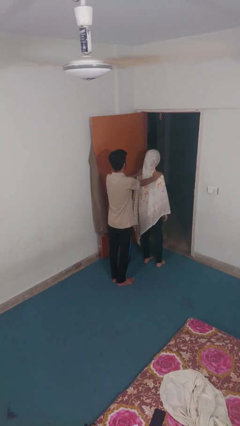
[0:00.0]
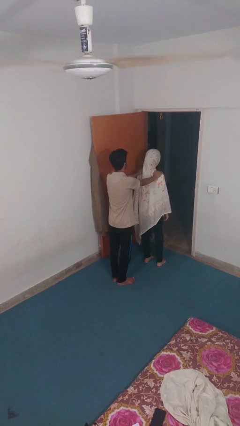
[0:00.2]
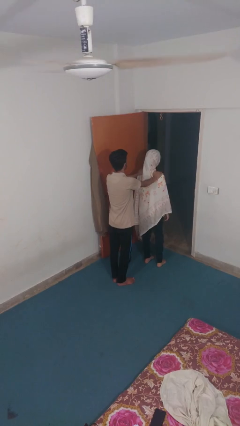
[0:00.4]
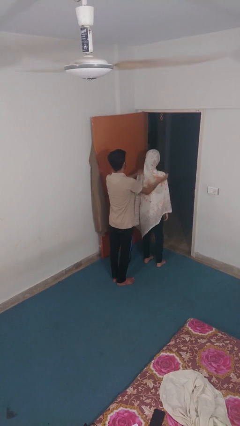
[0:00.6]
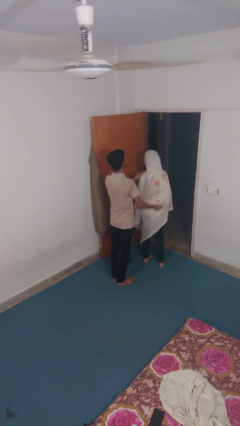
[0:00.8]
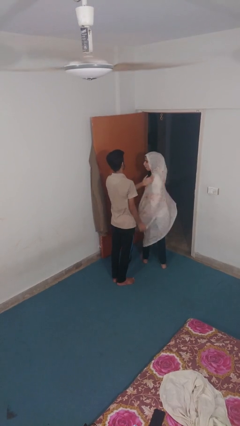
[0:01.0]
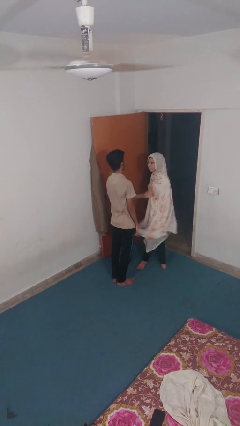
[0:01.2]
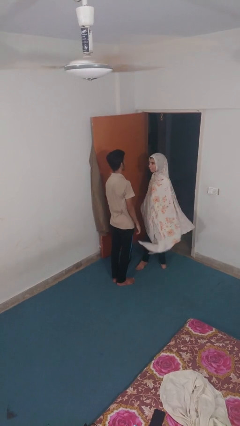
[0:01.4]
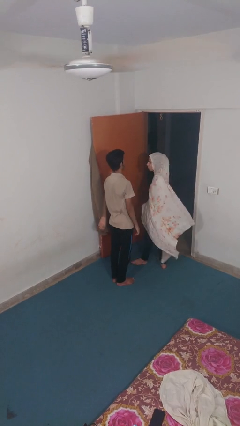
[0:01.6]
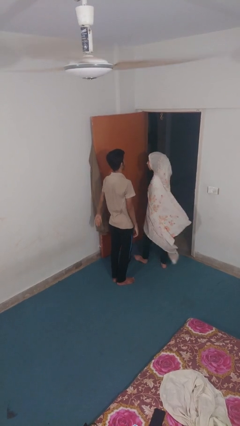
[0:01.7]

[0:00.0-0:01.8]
person spins person around

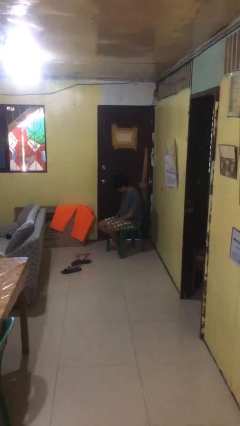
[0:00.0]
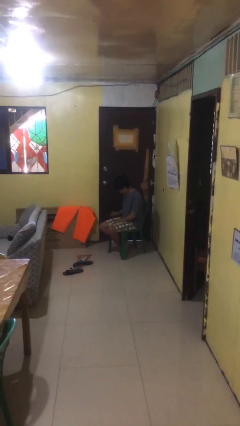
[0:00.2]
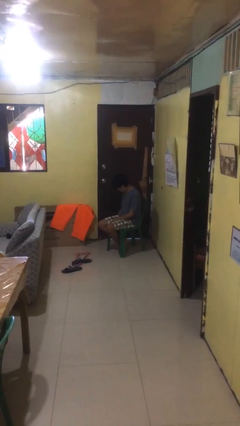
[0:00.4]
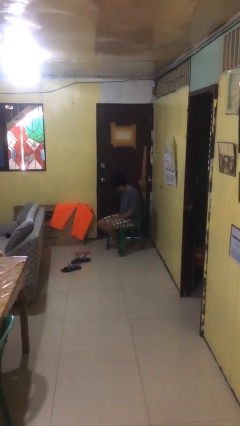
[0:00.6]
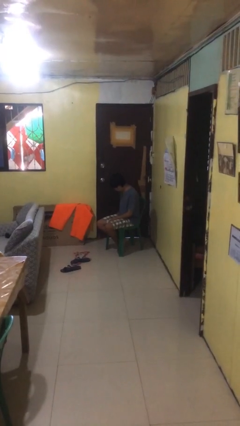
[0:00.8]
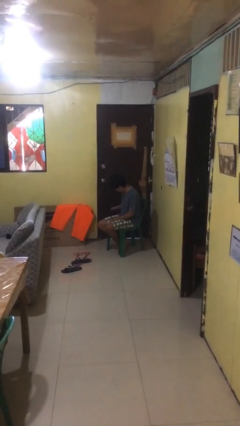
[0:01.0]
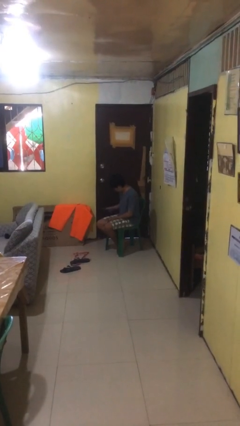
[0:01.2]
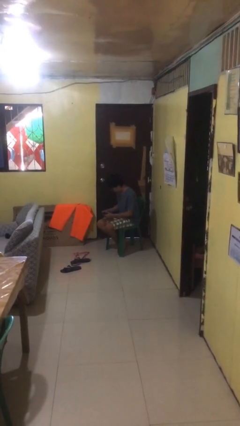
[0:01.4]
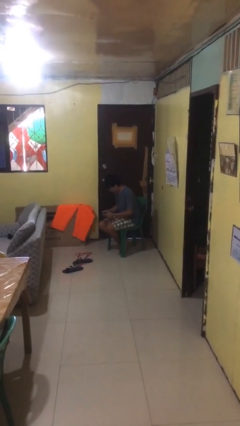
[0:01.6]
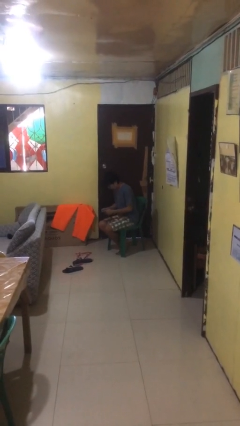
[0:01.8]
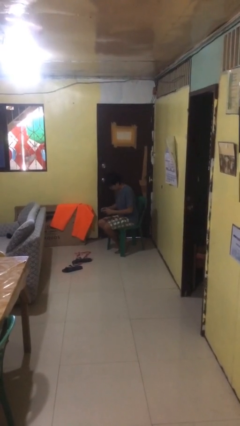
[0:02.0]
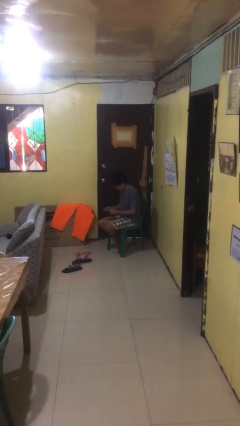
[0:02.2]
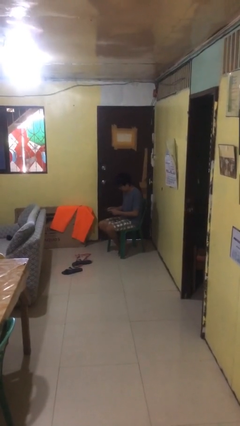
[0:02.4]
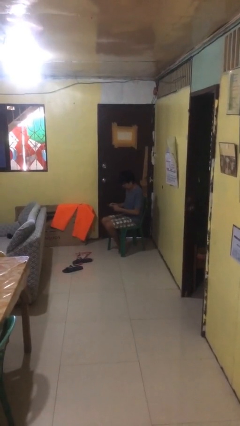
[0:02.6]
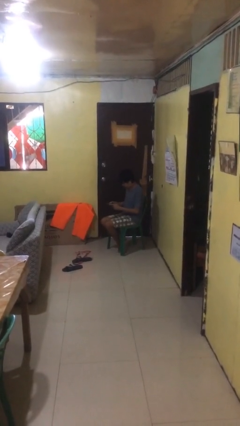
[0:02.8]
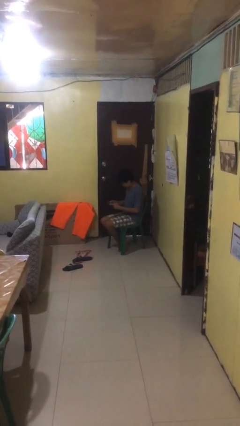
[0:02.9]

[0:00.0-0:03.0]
person takes phone from pocket

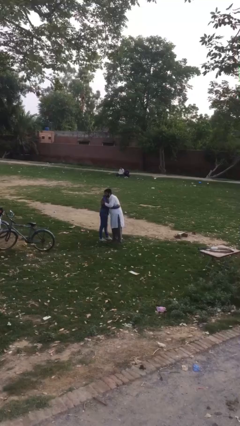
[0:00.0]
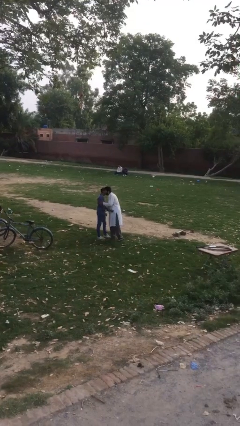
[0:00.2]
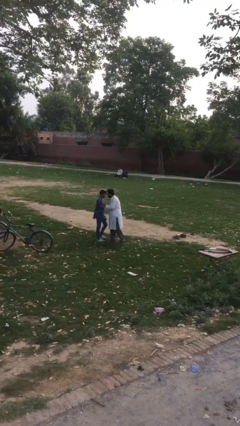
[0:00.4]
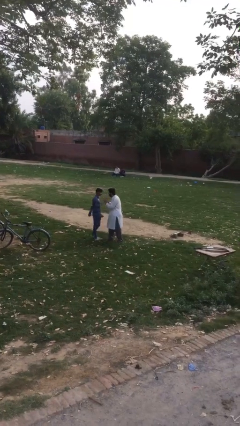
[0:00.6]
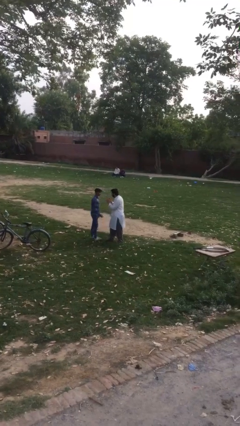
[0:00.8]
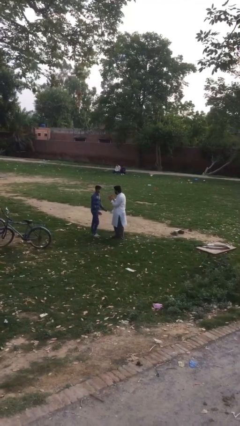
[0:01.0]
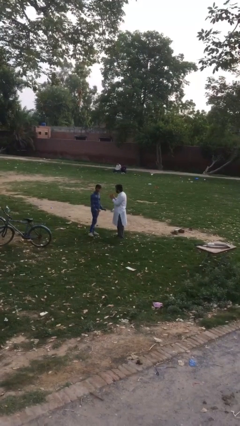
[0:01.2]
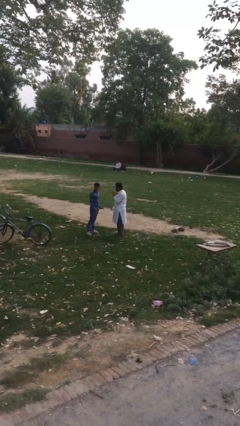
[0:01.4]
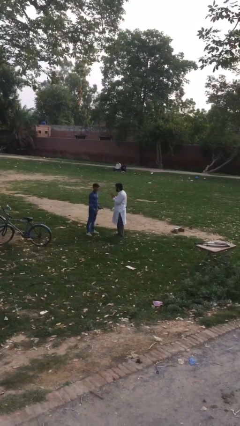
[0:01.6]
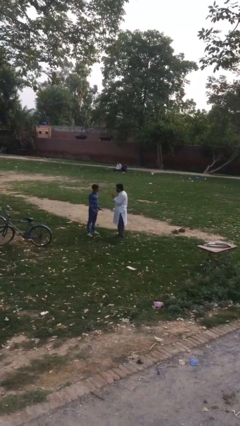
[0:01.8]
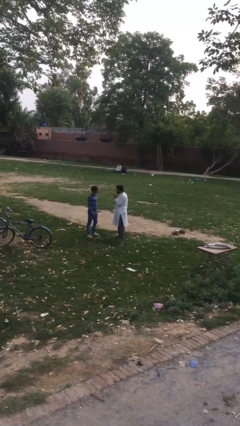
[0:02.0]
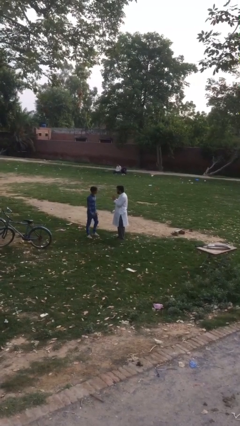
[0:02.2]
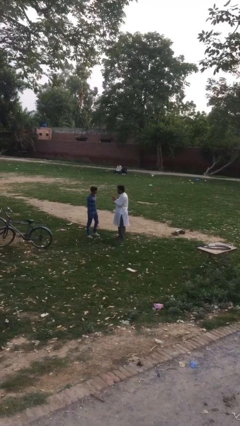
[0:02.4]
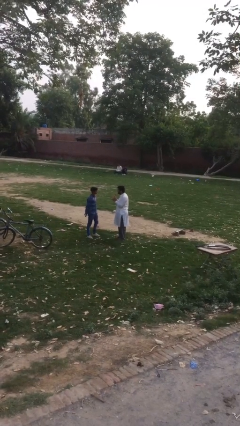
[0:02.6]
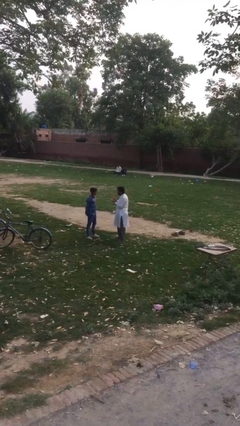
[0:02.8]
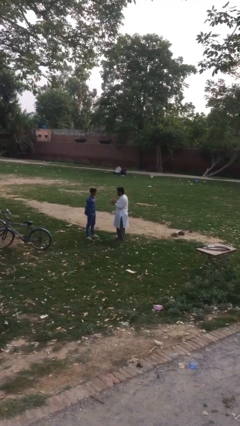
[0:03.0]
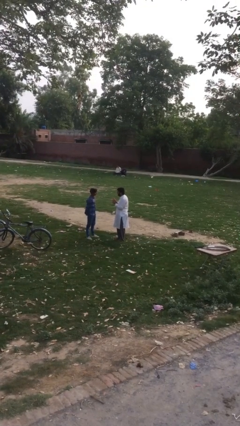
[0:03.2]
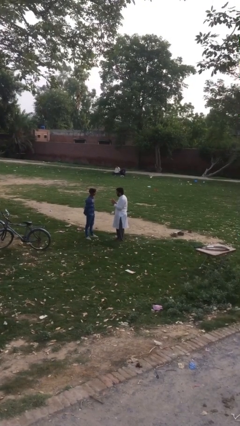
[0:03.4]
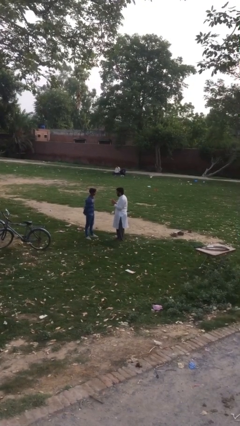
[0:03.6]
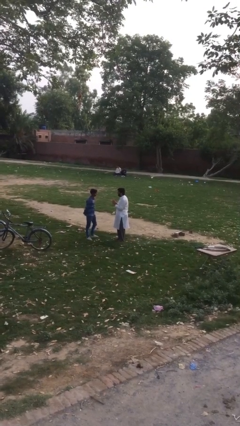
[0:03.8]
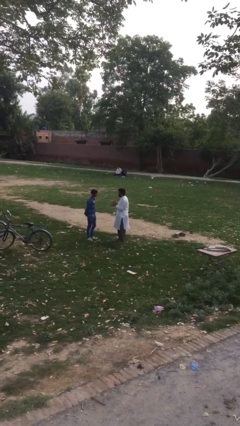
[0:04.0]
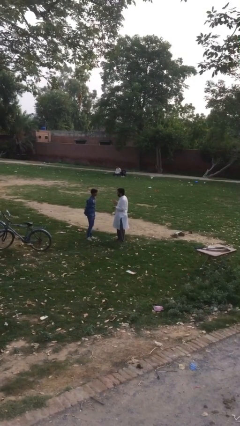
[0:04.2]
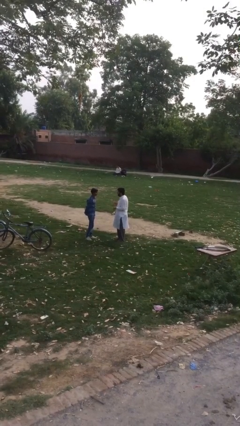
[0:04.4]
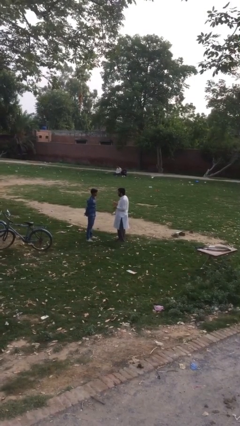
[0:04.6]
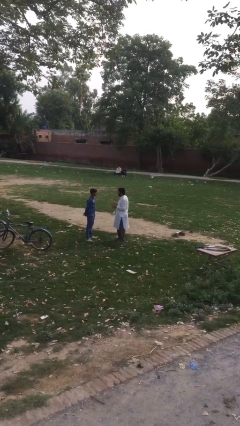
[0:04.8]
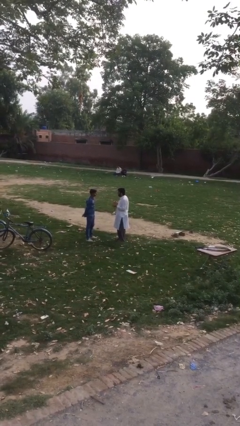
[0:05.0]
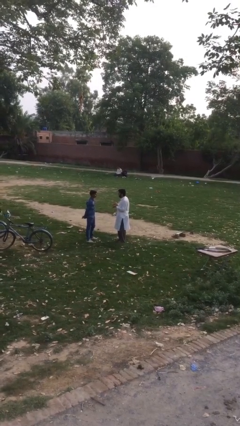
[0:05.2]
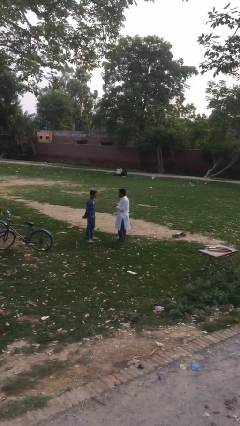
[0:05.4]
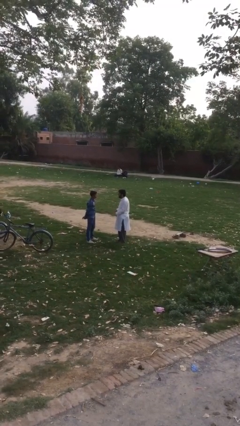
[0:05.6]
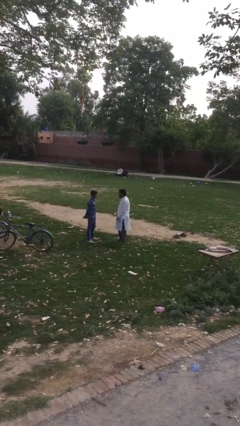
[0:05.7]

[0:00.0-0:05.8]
person talks to person

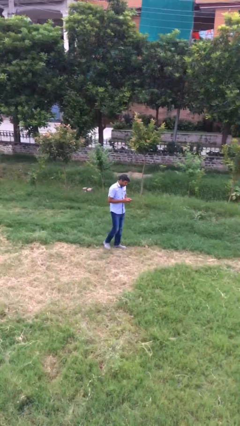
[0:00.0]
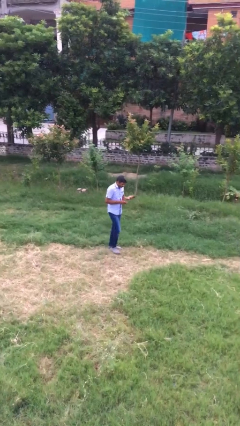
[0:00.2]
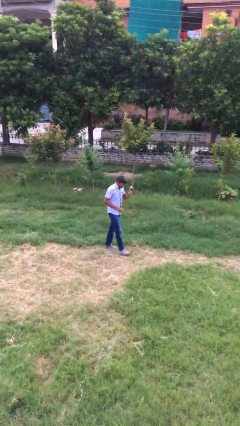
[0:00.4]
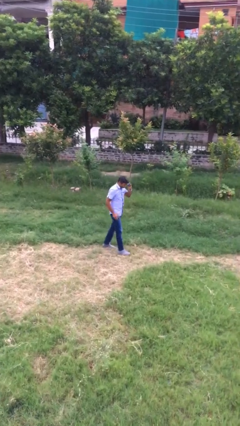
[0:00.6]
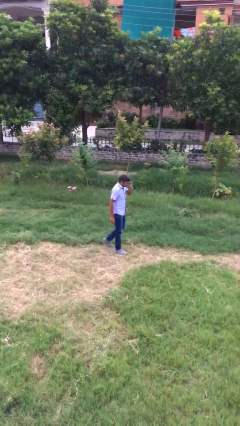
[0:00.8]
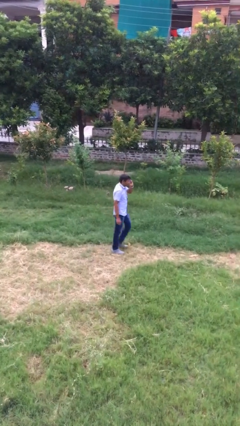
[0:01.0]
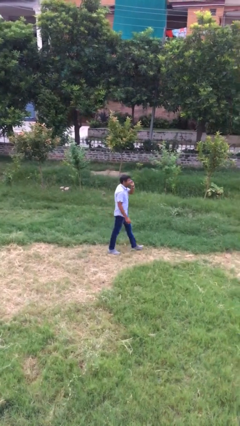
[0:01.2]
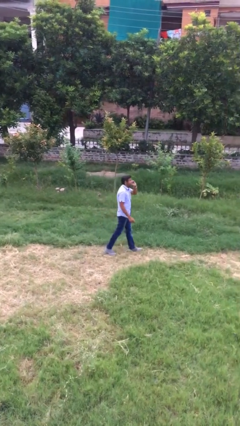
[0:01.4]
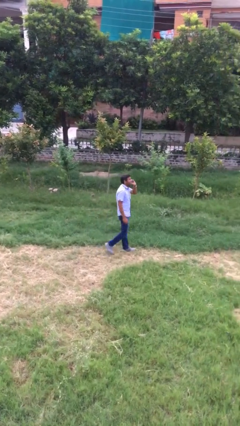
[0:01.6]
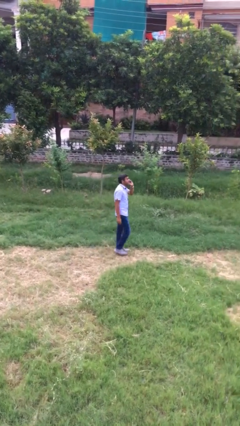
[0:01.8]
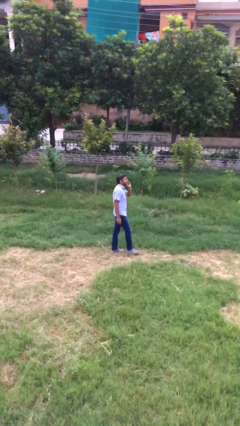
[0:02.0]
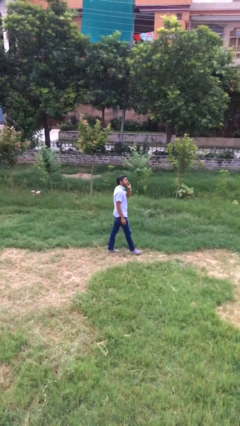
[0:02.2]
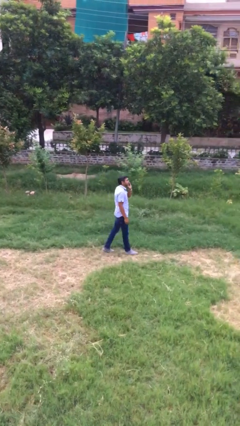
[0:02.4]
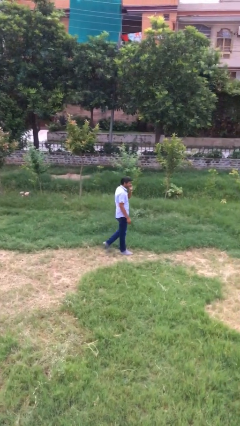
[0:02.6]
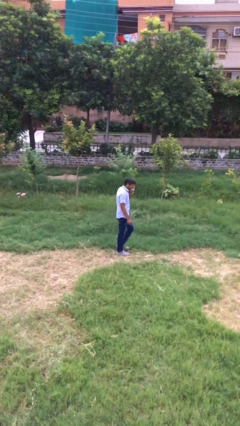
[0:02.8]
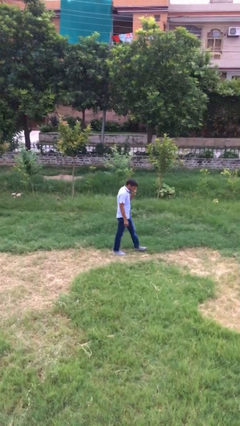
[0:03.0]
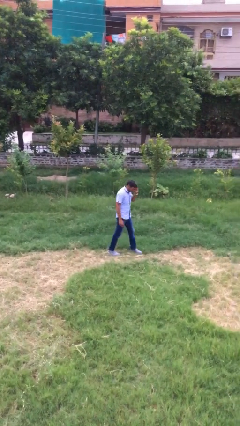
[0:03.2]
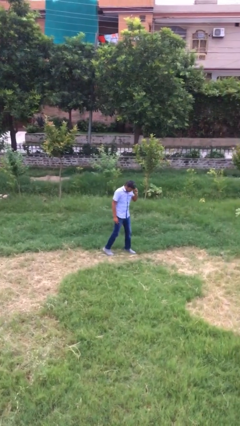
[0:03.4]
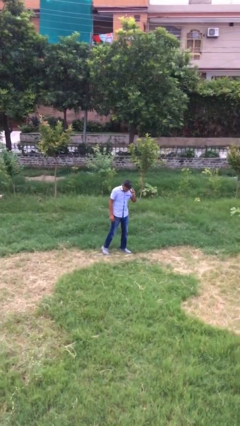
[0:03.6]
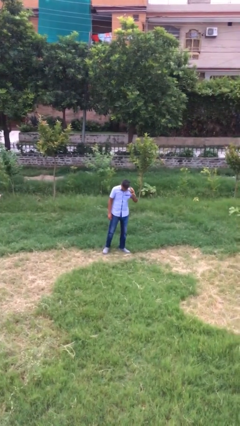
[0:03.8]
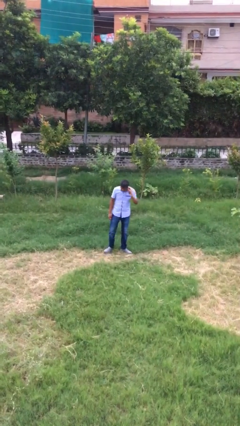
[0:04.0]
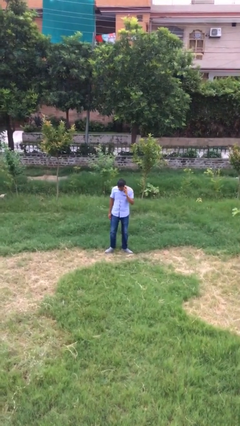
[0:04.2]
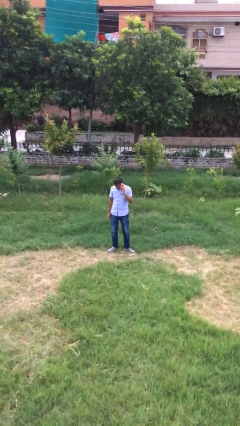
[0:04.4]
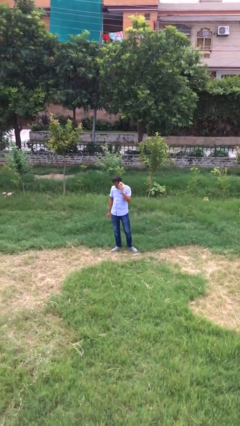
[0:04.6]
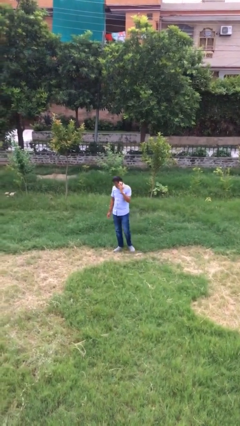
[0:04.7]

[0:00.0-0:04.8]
person talks on phone

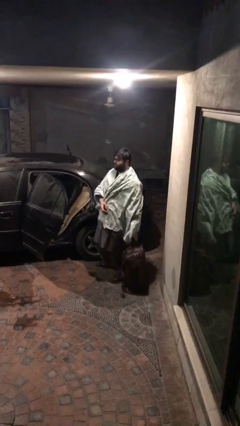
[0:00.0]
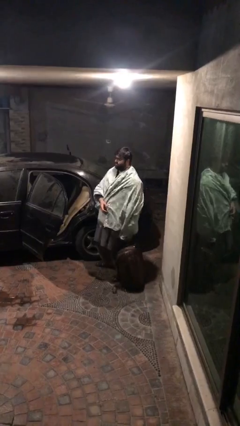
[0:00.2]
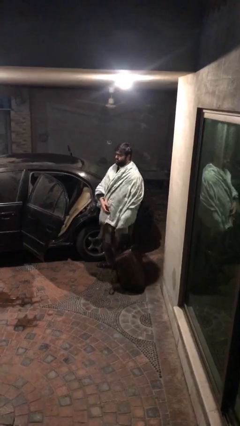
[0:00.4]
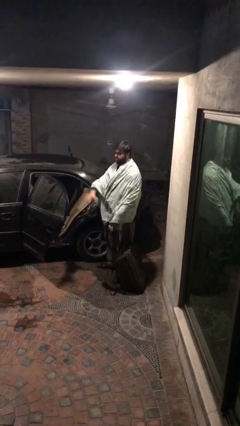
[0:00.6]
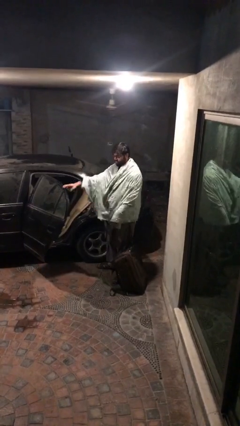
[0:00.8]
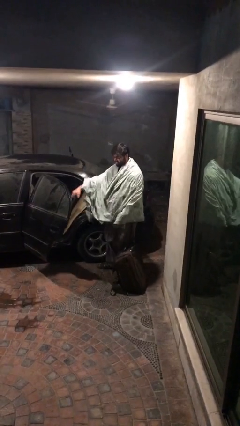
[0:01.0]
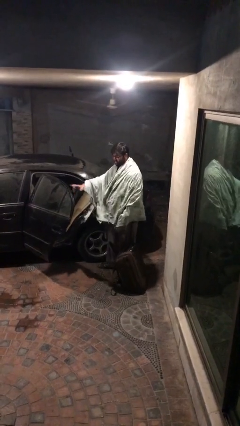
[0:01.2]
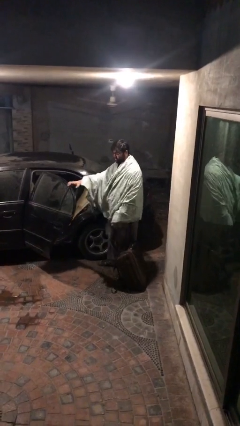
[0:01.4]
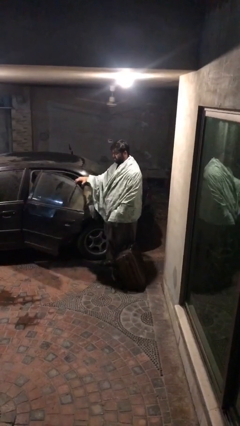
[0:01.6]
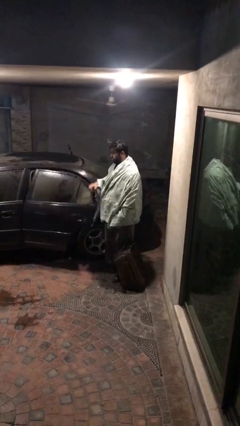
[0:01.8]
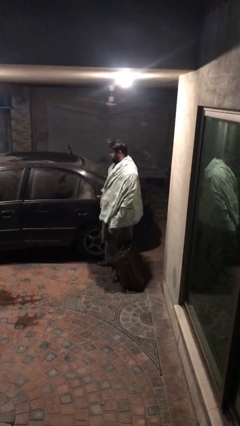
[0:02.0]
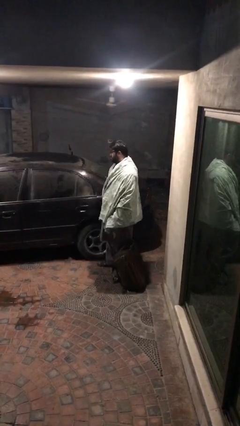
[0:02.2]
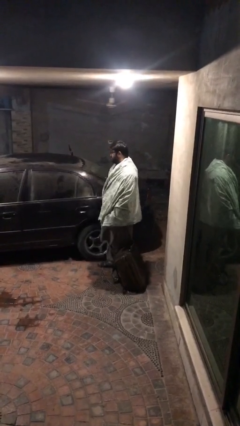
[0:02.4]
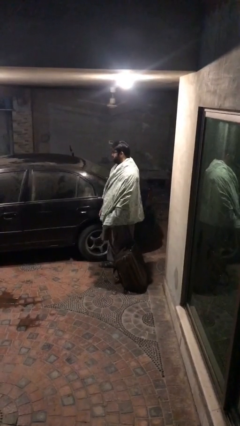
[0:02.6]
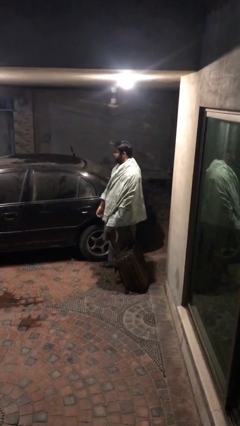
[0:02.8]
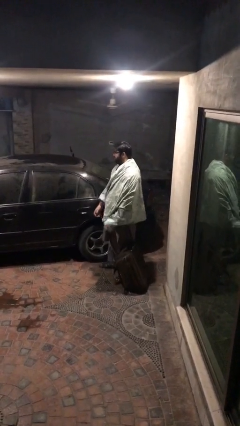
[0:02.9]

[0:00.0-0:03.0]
person closes car door
